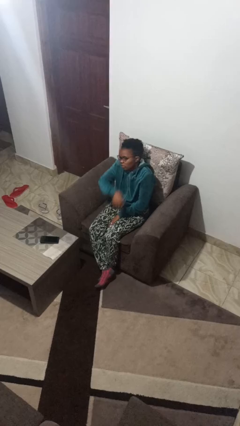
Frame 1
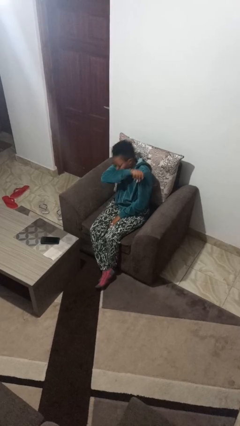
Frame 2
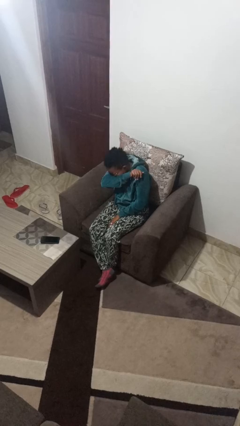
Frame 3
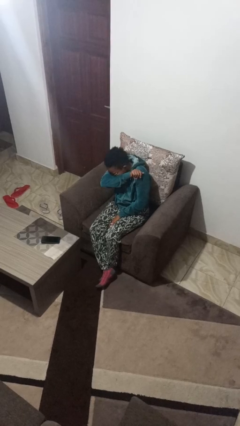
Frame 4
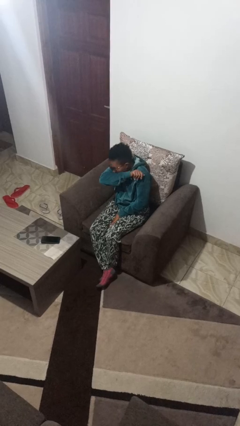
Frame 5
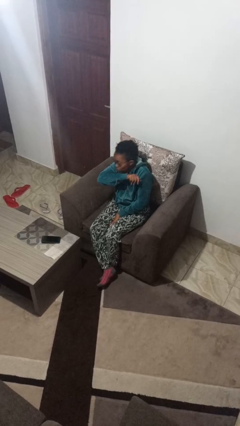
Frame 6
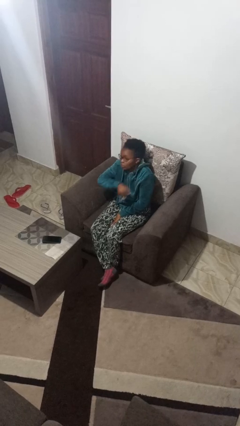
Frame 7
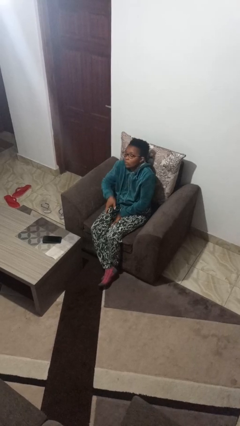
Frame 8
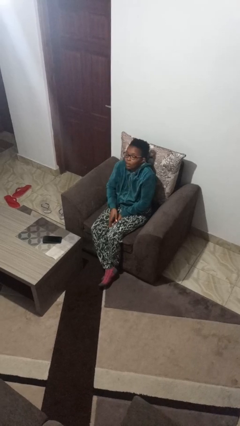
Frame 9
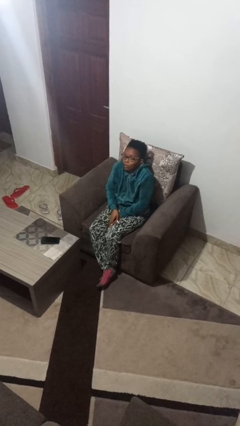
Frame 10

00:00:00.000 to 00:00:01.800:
person sneezes into arm

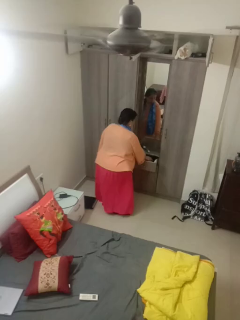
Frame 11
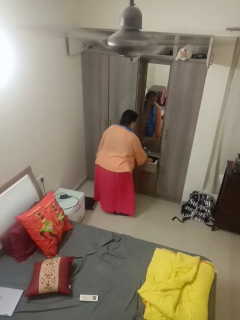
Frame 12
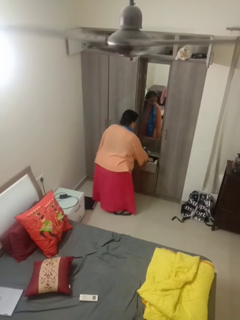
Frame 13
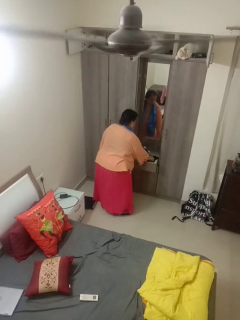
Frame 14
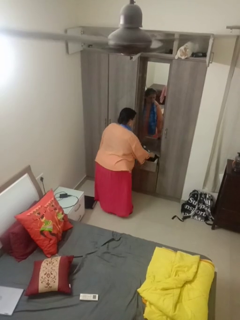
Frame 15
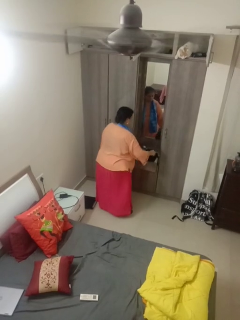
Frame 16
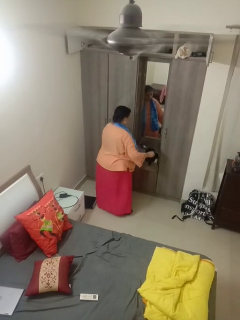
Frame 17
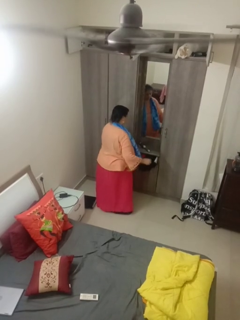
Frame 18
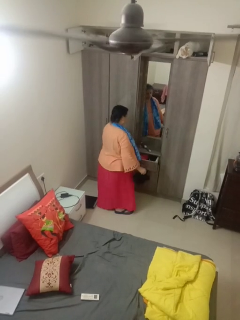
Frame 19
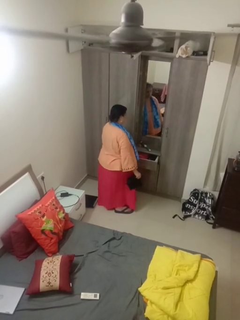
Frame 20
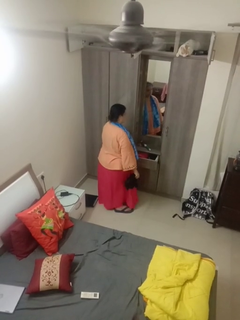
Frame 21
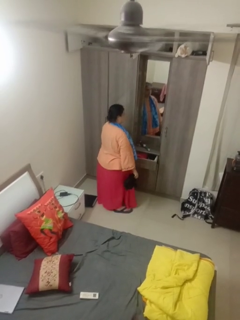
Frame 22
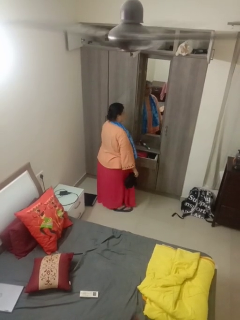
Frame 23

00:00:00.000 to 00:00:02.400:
person takes clothes from dresser

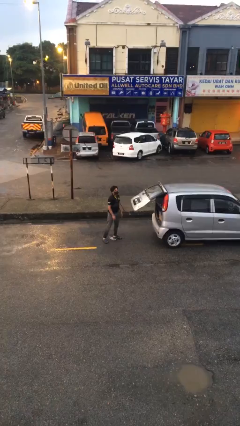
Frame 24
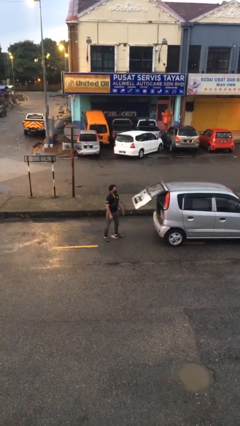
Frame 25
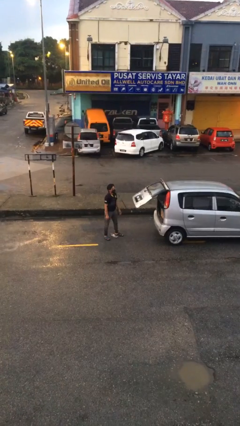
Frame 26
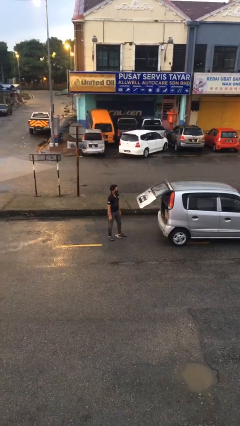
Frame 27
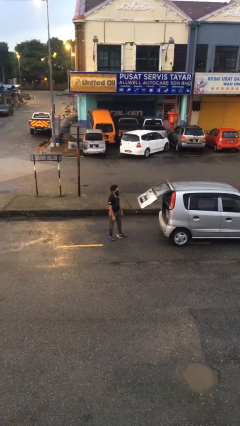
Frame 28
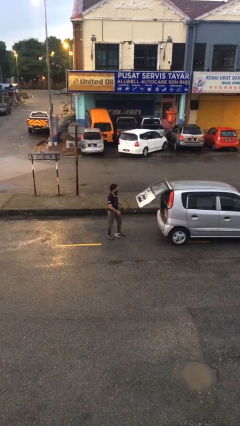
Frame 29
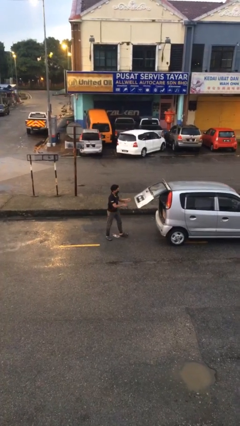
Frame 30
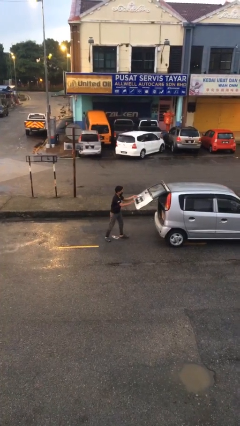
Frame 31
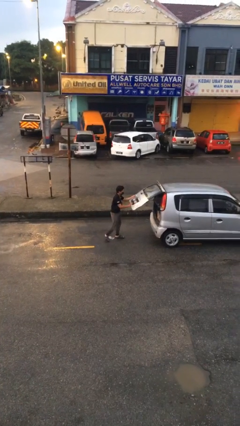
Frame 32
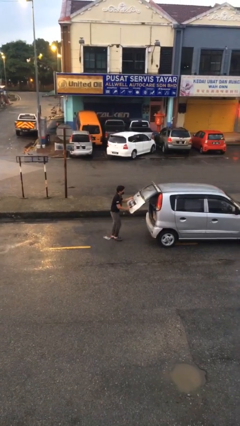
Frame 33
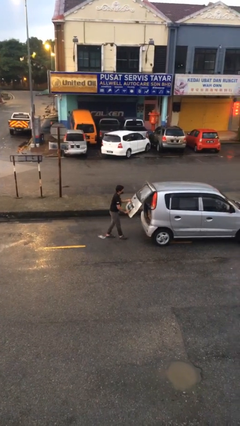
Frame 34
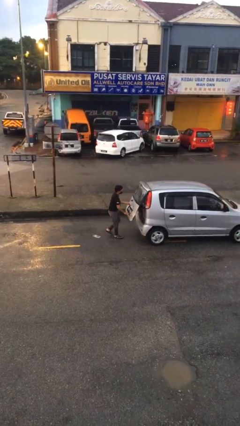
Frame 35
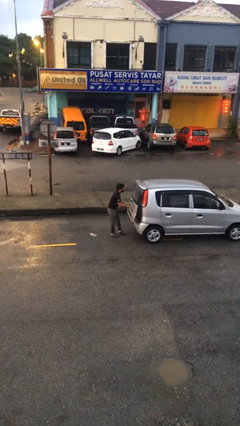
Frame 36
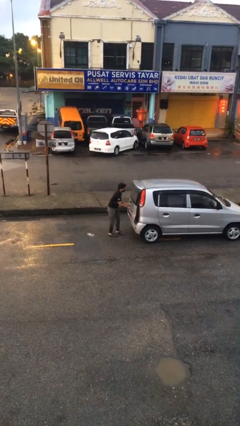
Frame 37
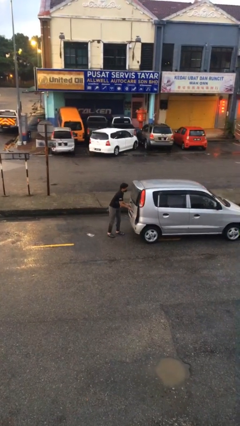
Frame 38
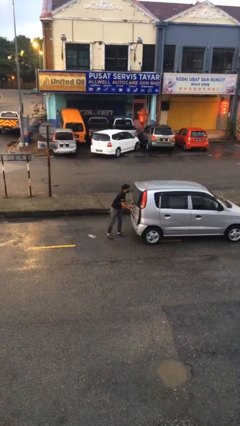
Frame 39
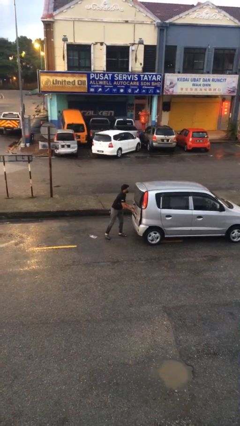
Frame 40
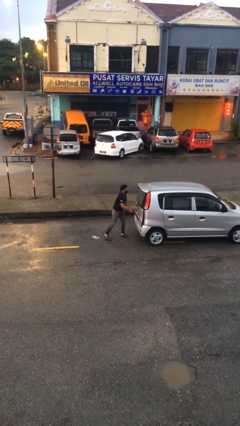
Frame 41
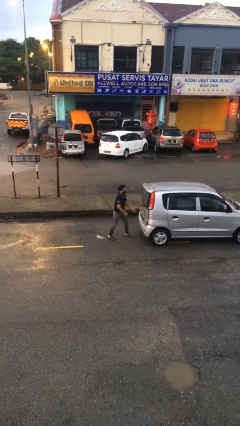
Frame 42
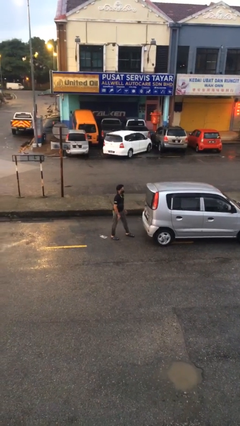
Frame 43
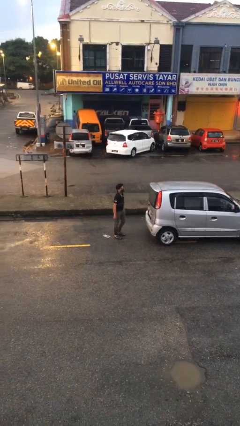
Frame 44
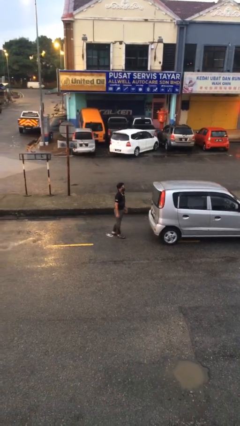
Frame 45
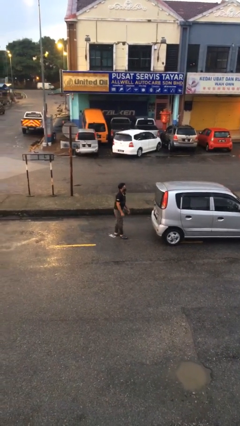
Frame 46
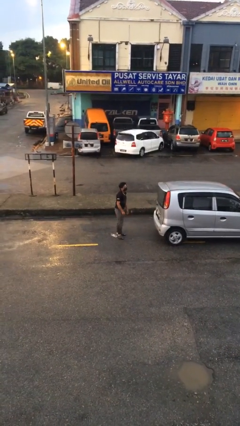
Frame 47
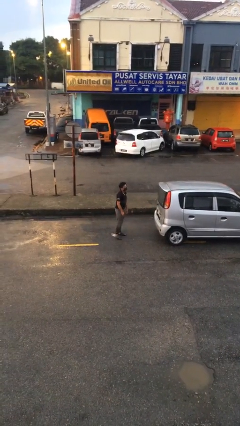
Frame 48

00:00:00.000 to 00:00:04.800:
person closes car trunk

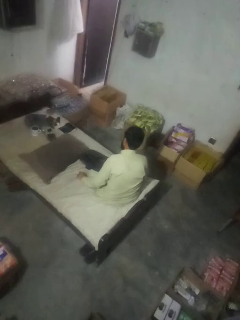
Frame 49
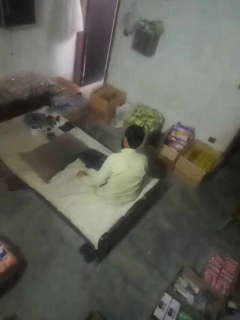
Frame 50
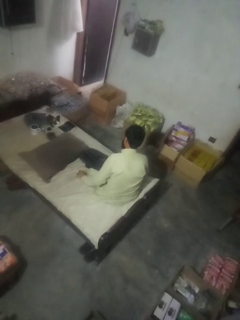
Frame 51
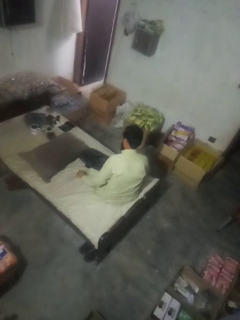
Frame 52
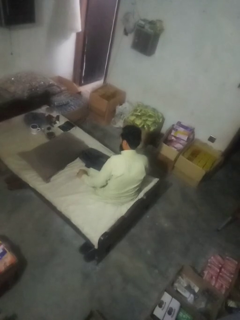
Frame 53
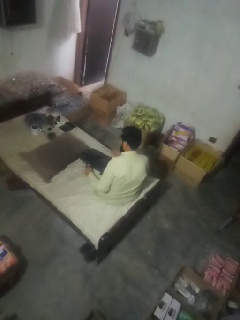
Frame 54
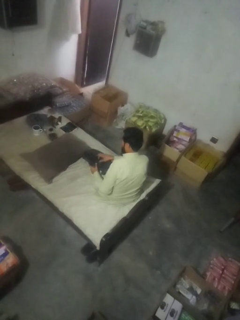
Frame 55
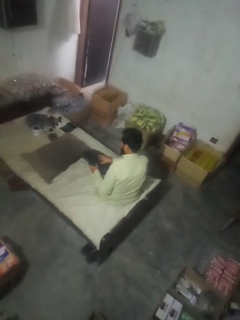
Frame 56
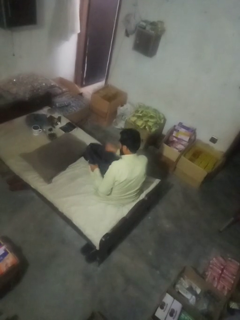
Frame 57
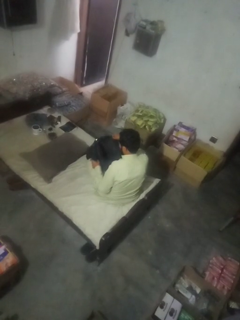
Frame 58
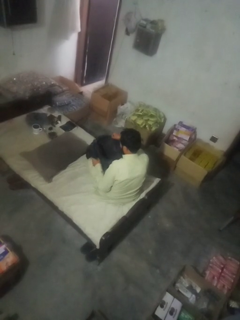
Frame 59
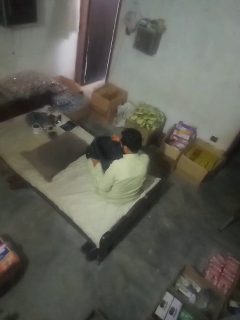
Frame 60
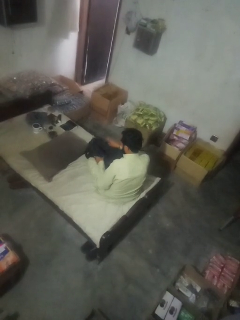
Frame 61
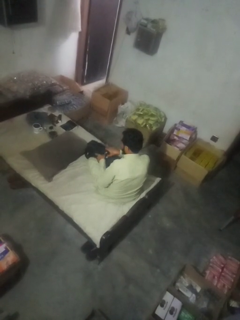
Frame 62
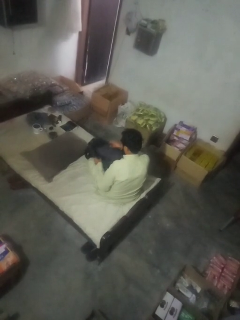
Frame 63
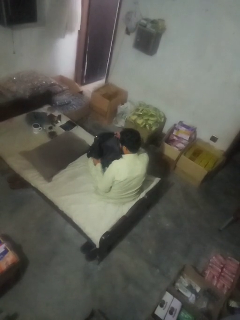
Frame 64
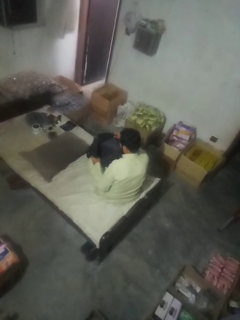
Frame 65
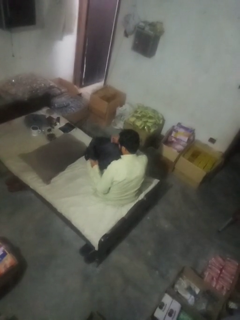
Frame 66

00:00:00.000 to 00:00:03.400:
person searches in bag

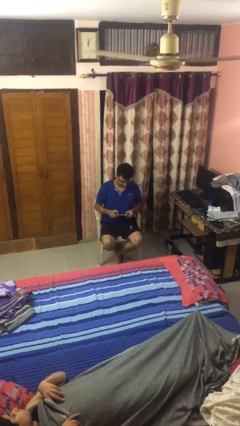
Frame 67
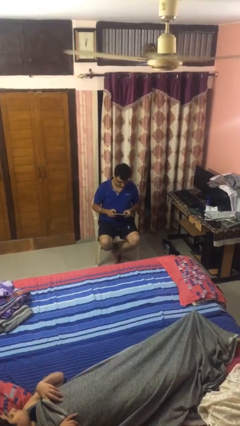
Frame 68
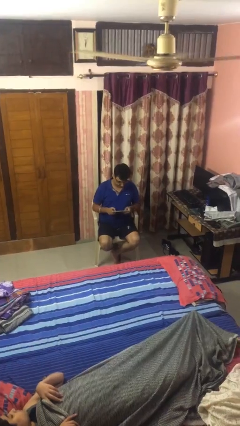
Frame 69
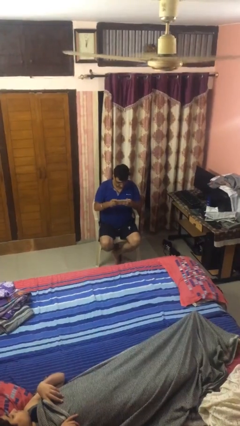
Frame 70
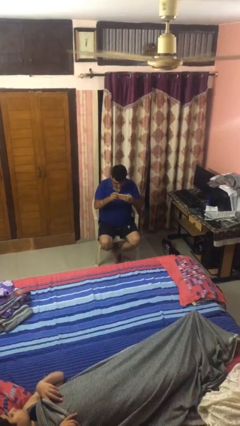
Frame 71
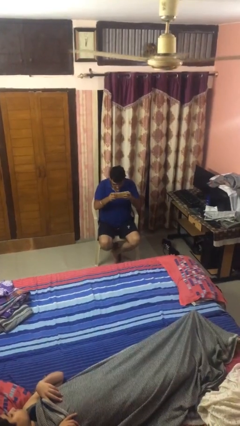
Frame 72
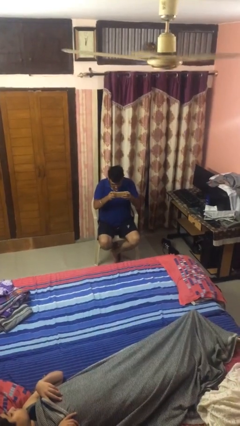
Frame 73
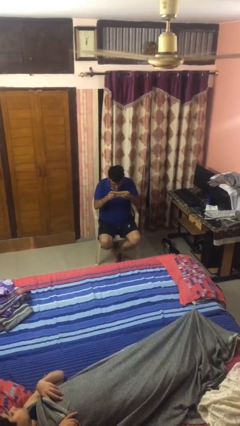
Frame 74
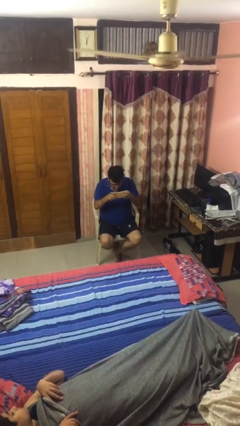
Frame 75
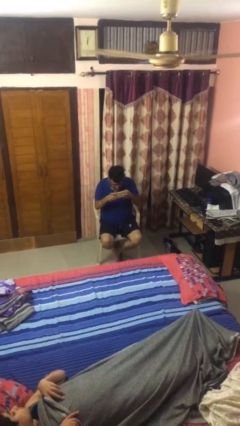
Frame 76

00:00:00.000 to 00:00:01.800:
person interacts with handheld game

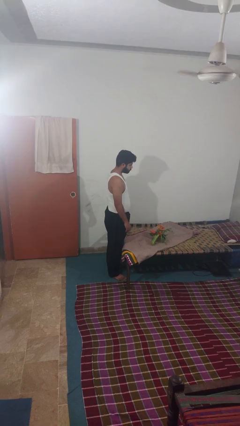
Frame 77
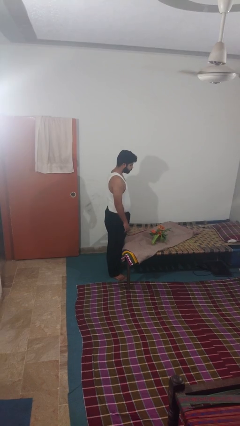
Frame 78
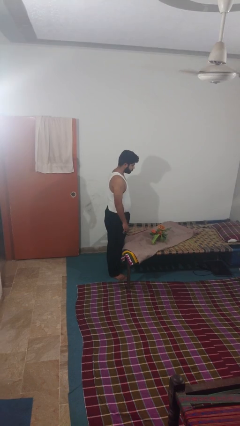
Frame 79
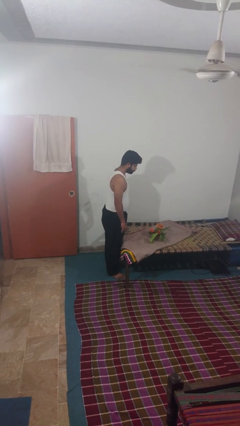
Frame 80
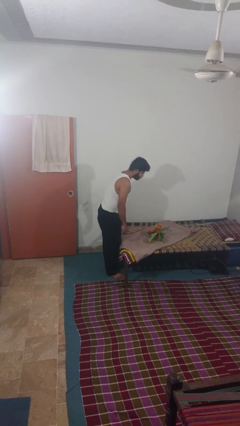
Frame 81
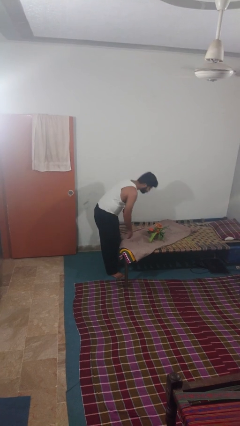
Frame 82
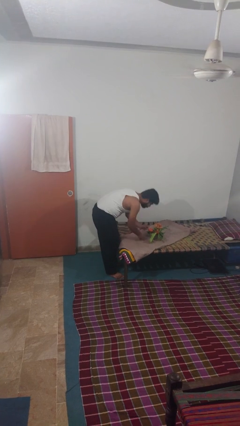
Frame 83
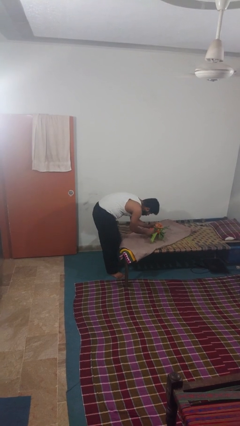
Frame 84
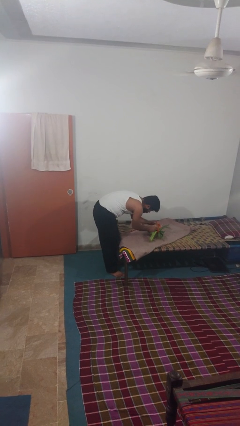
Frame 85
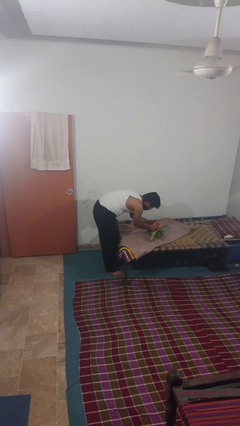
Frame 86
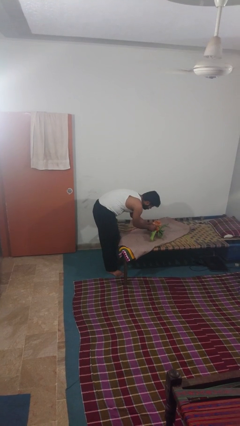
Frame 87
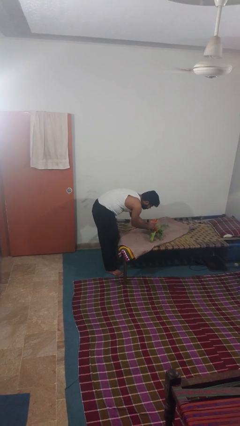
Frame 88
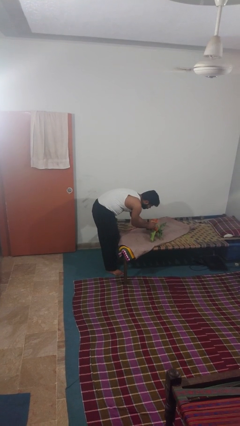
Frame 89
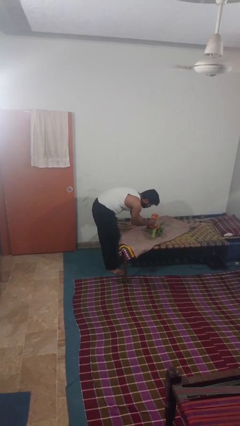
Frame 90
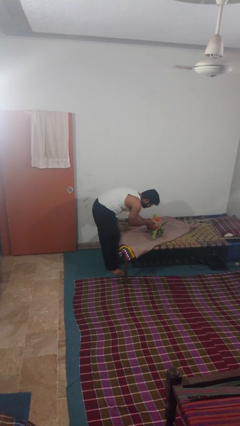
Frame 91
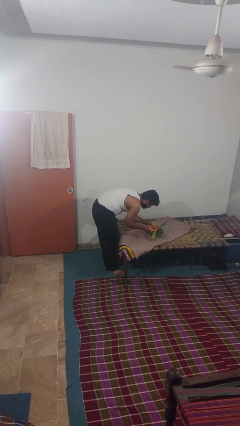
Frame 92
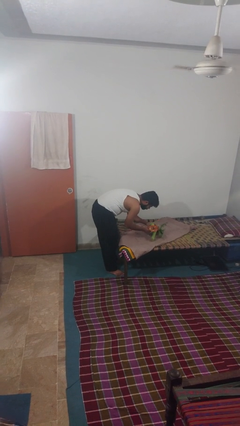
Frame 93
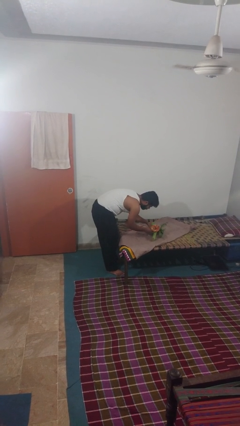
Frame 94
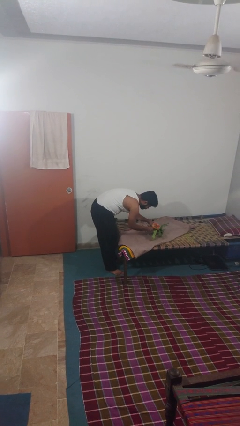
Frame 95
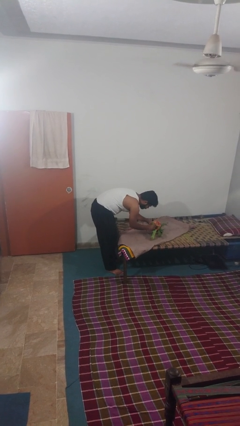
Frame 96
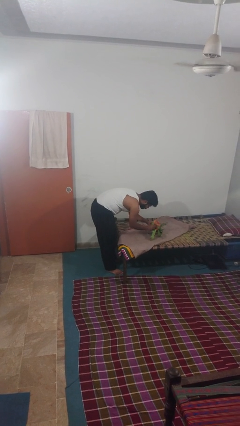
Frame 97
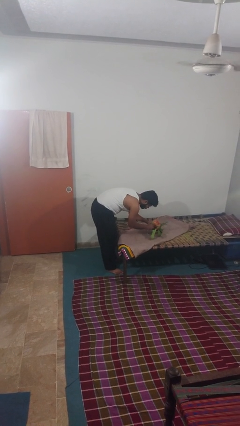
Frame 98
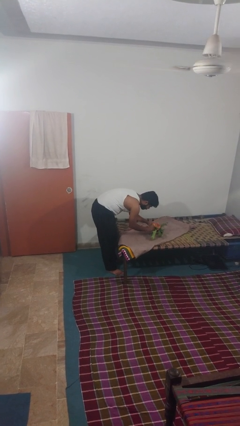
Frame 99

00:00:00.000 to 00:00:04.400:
person arranges flowers in vase

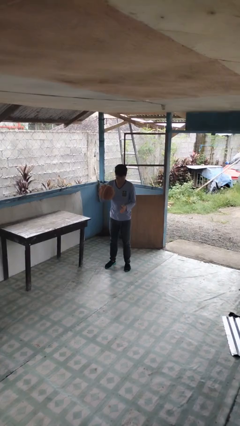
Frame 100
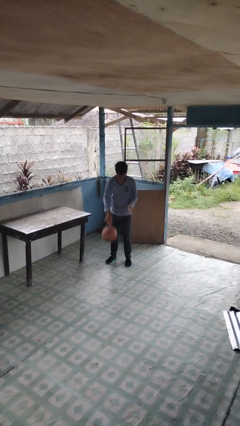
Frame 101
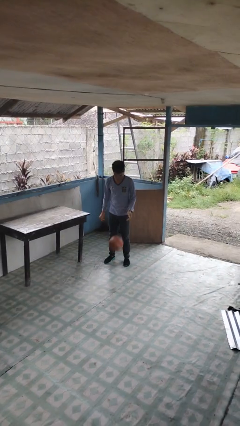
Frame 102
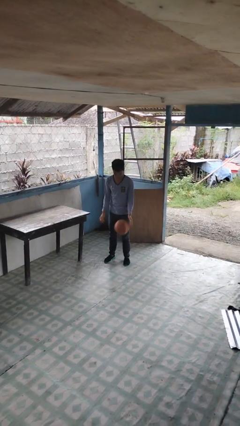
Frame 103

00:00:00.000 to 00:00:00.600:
person bounces ball on floor
